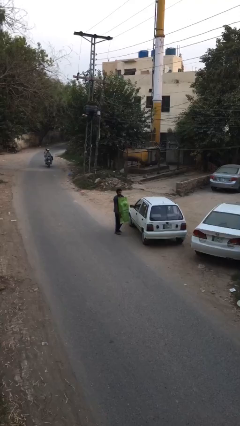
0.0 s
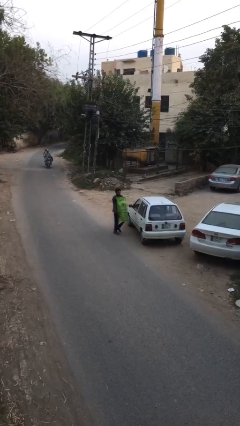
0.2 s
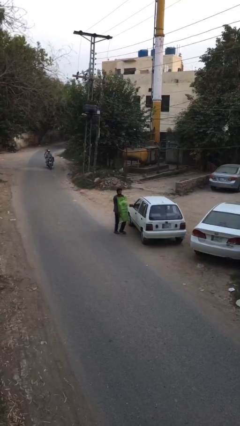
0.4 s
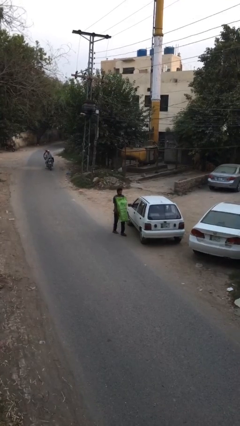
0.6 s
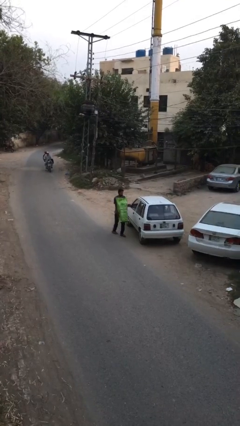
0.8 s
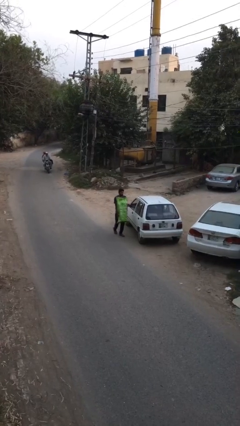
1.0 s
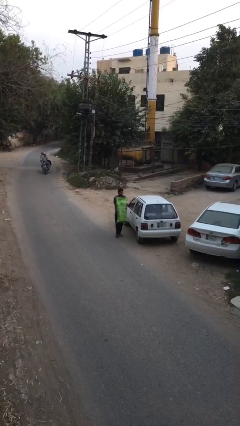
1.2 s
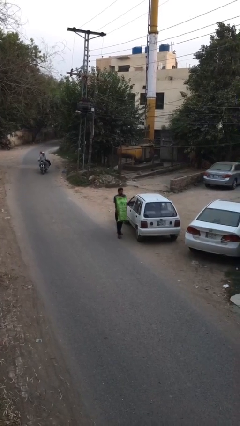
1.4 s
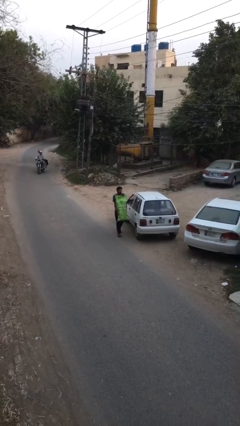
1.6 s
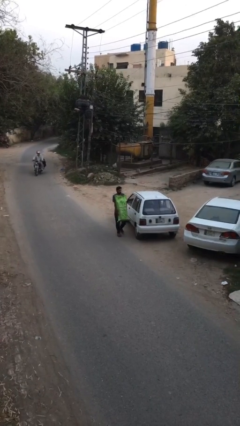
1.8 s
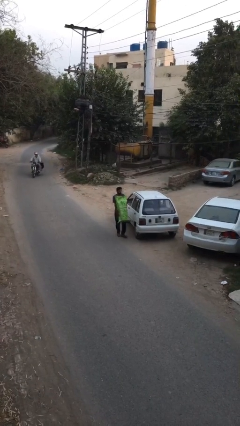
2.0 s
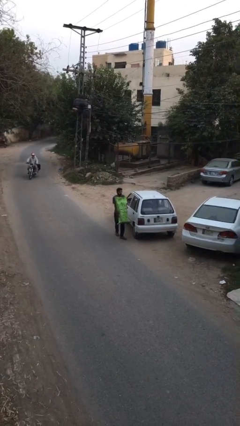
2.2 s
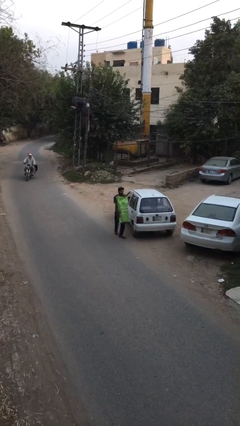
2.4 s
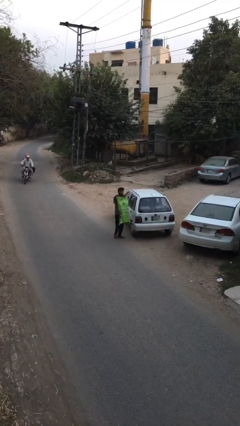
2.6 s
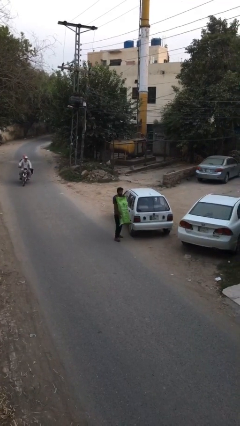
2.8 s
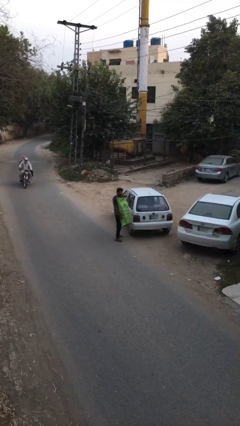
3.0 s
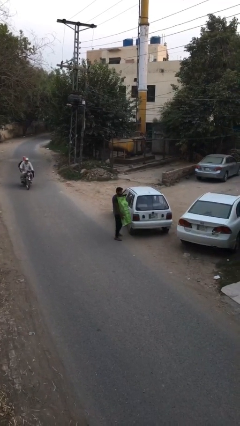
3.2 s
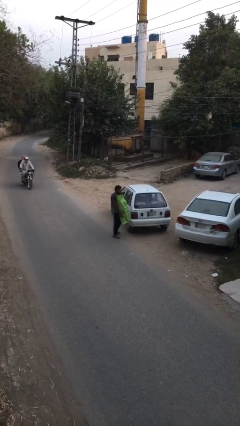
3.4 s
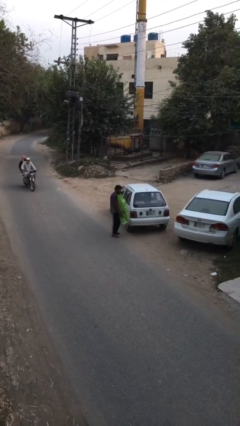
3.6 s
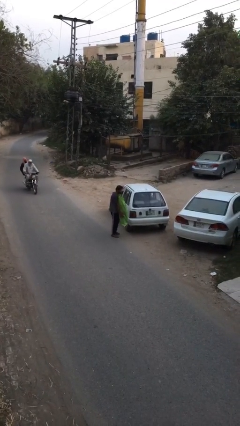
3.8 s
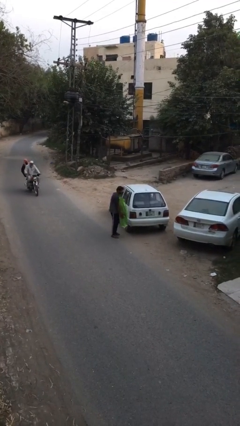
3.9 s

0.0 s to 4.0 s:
person carries heavy object

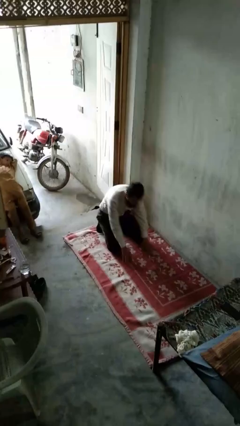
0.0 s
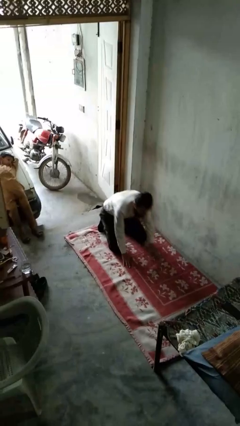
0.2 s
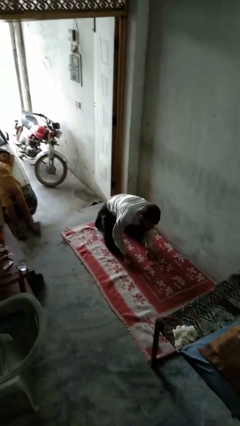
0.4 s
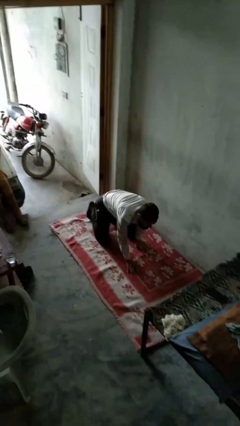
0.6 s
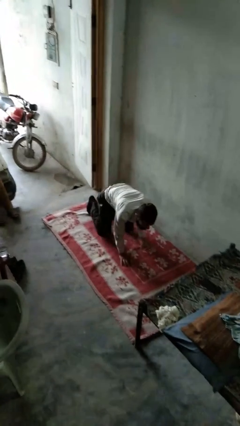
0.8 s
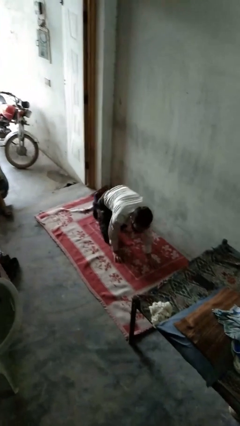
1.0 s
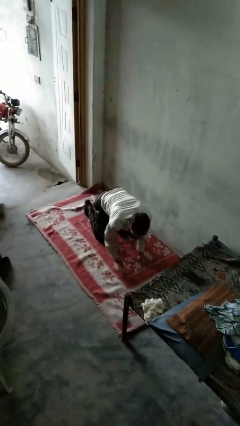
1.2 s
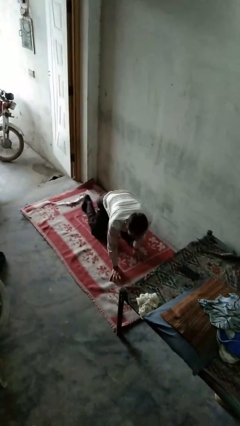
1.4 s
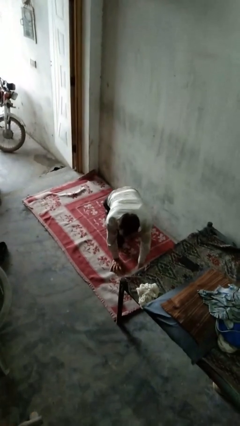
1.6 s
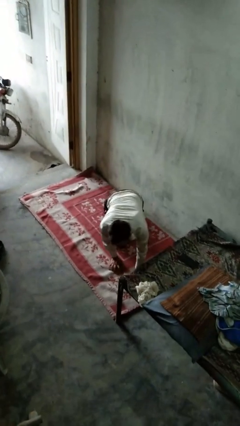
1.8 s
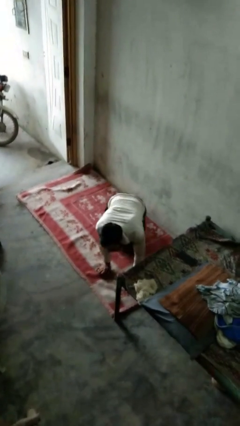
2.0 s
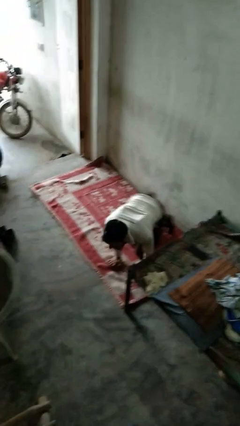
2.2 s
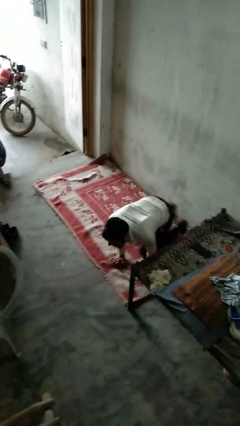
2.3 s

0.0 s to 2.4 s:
person crawls

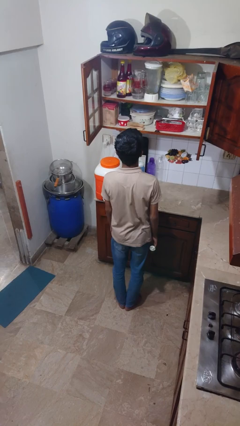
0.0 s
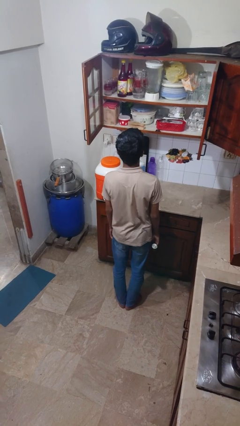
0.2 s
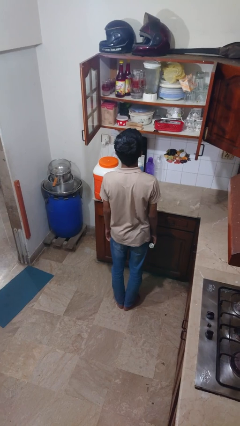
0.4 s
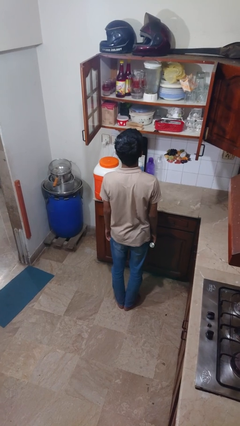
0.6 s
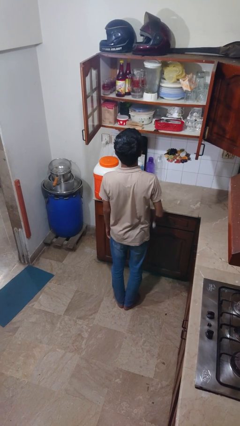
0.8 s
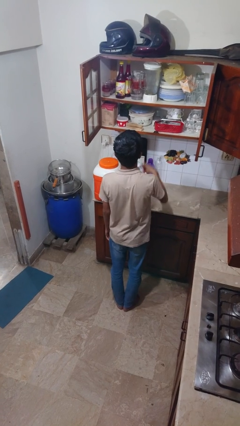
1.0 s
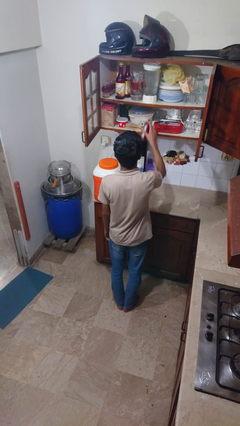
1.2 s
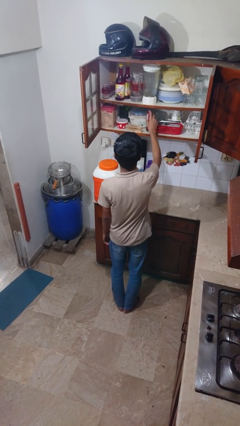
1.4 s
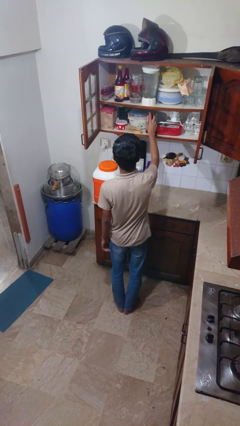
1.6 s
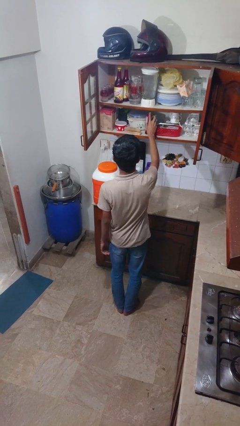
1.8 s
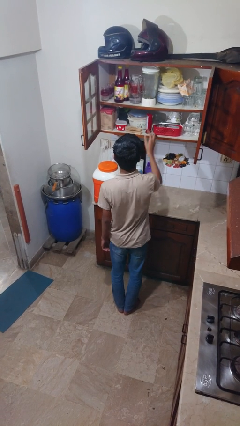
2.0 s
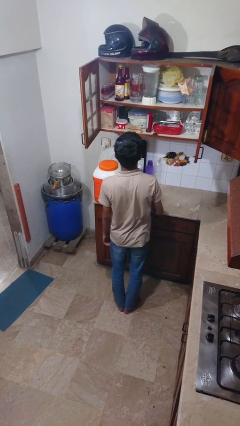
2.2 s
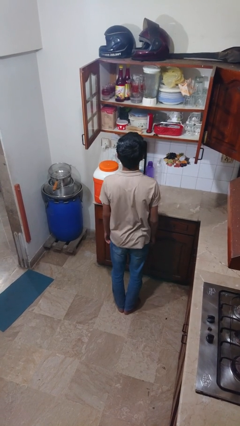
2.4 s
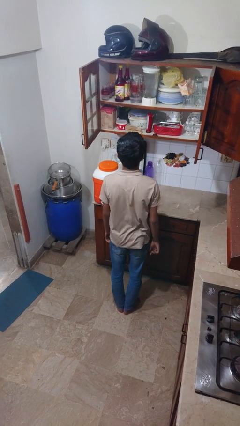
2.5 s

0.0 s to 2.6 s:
person puts down object into cabinet

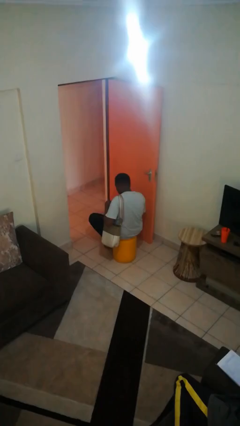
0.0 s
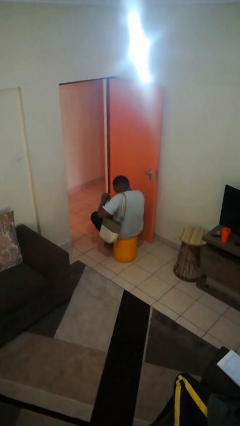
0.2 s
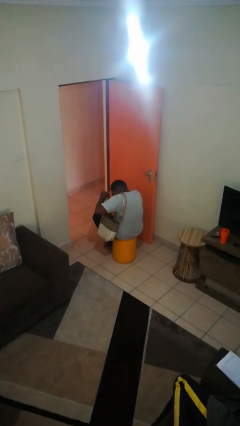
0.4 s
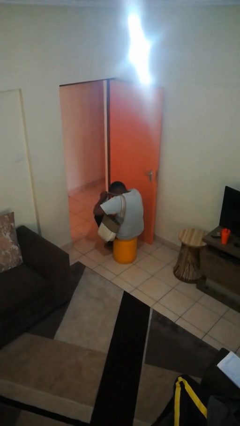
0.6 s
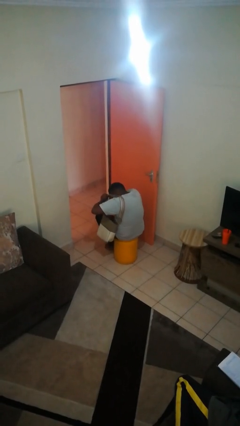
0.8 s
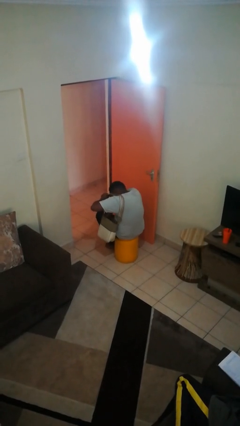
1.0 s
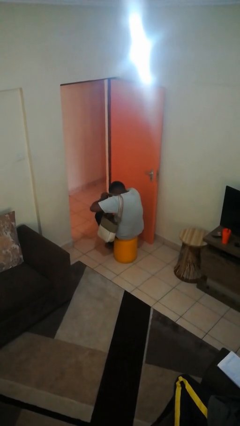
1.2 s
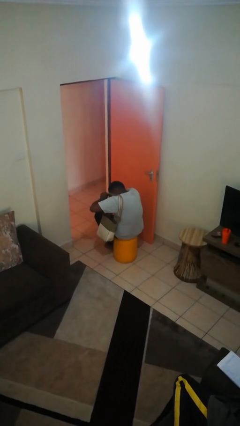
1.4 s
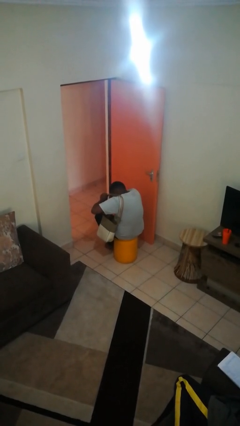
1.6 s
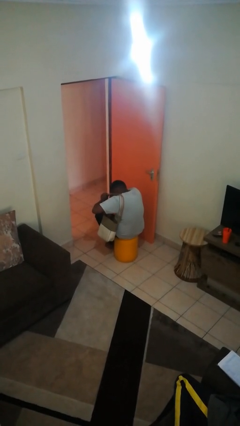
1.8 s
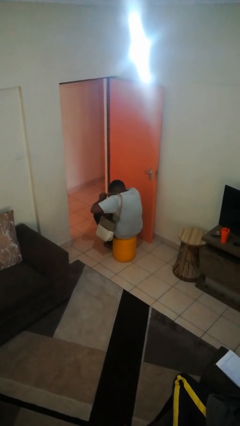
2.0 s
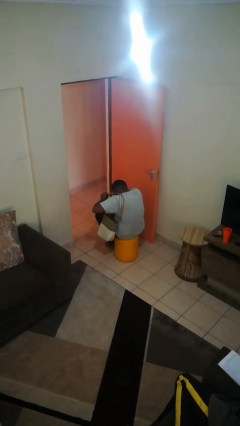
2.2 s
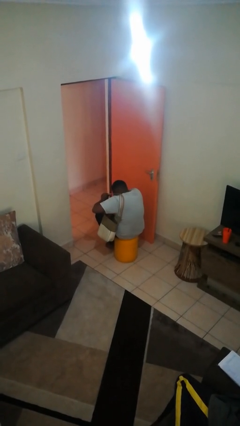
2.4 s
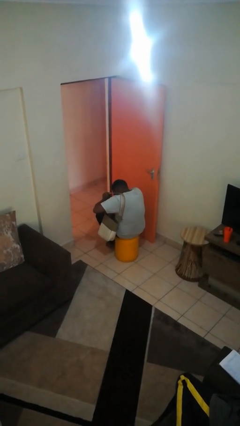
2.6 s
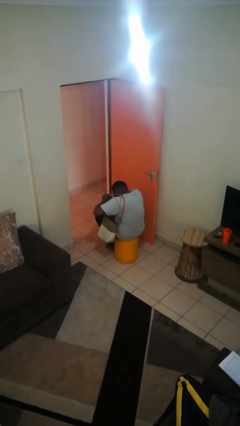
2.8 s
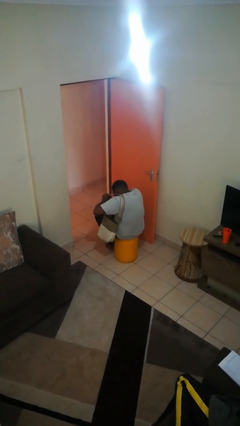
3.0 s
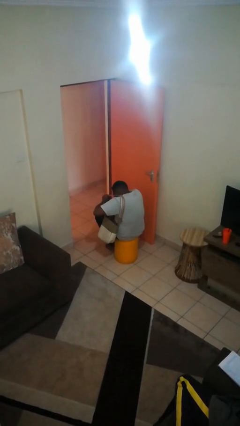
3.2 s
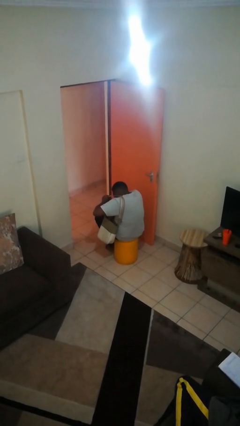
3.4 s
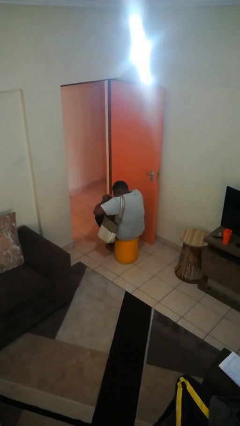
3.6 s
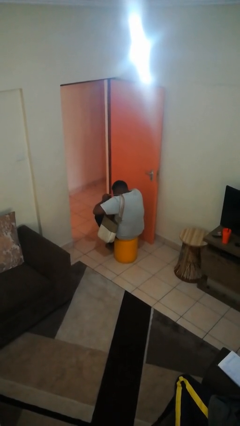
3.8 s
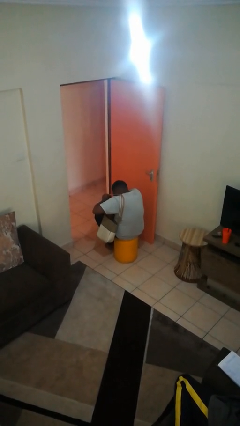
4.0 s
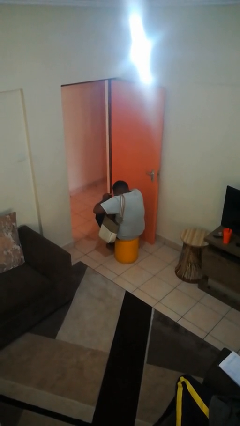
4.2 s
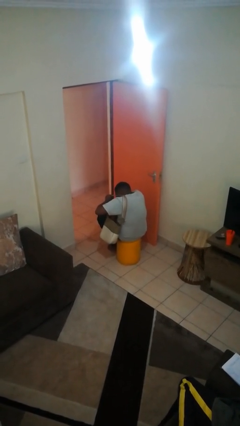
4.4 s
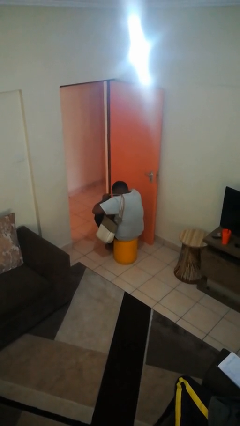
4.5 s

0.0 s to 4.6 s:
person searches in purse

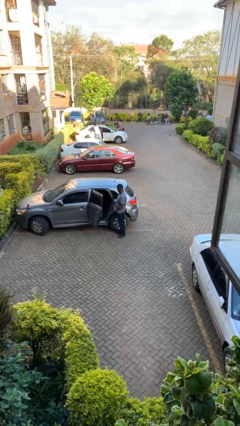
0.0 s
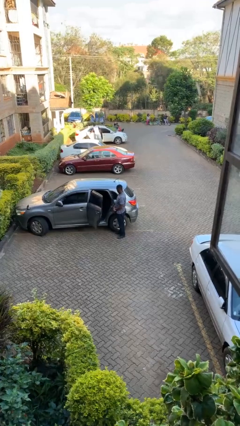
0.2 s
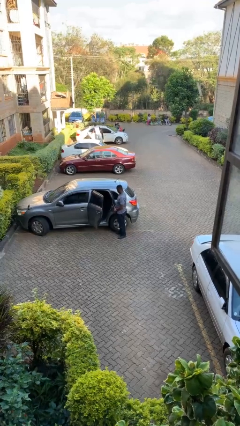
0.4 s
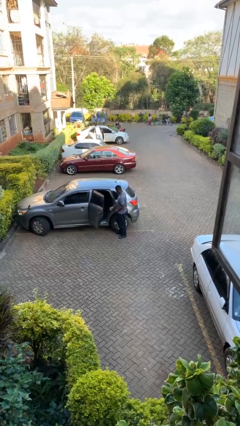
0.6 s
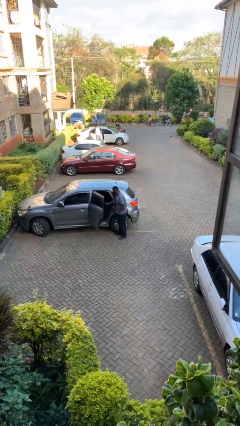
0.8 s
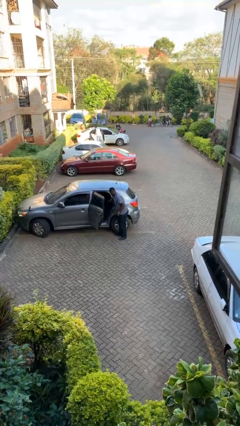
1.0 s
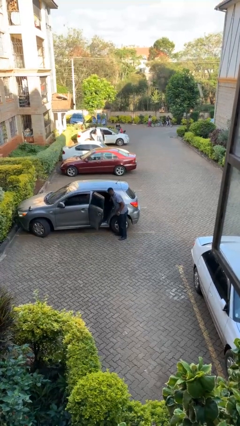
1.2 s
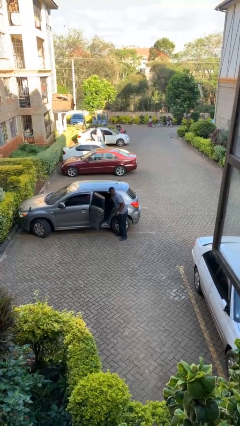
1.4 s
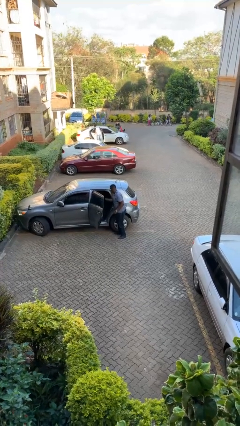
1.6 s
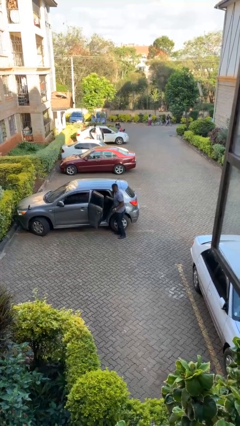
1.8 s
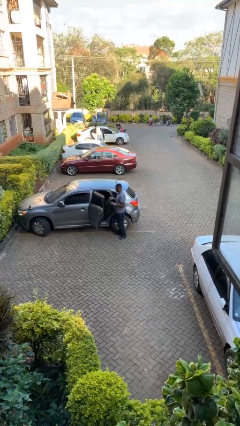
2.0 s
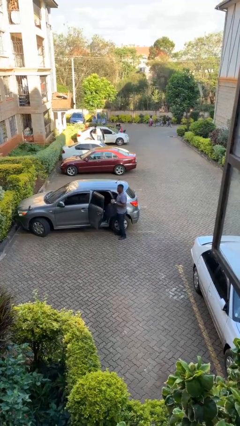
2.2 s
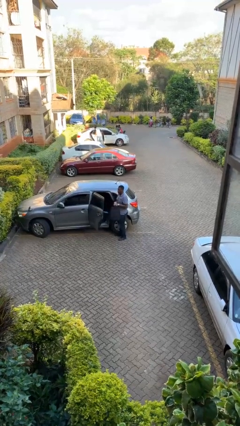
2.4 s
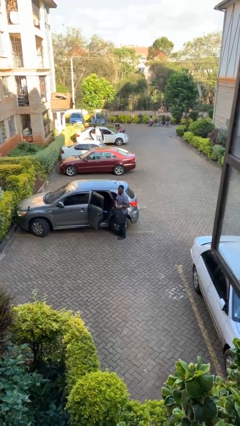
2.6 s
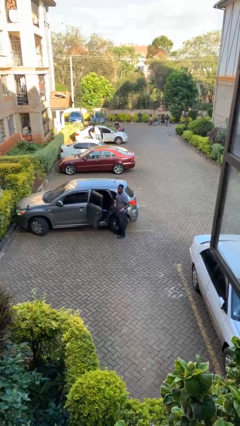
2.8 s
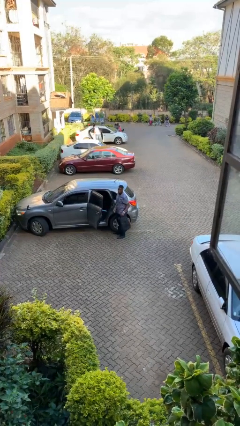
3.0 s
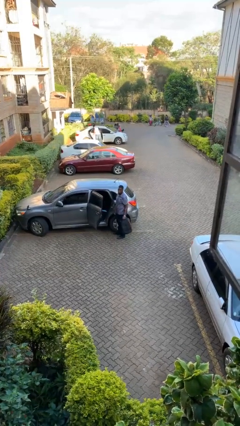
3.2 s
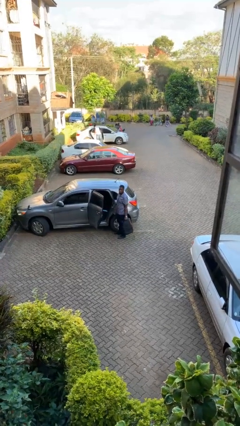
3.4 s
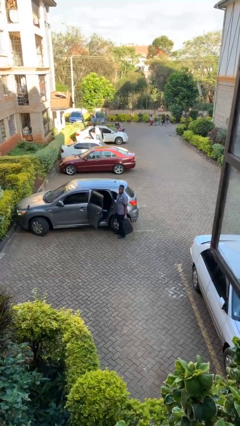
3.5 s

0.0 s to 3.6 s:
person unloads car

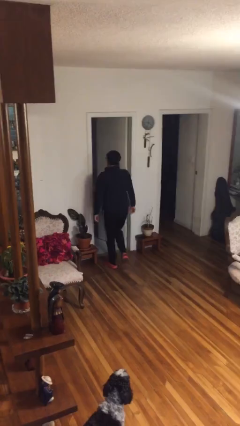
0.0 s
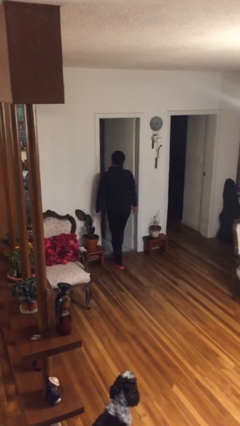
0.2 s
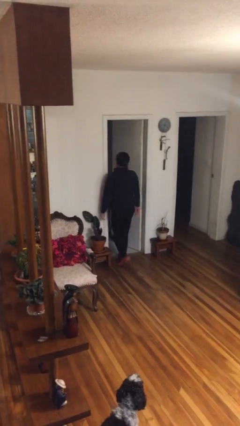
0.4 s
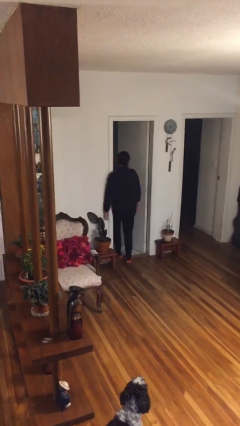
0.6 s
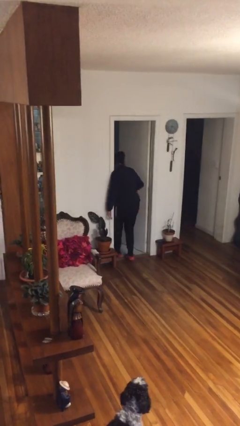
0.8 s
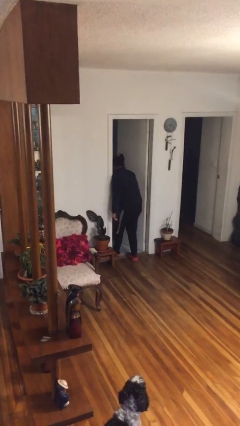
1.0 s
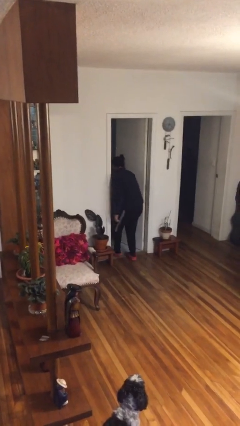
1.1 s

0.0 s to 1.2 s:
person bumps into wall
